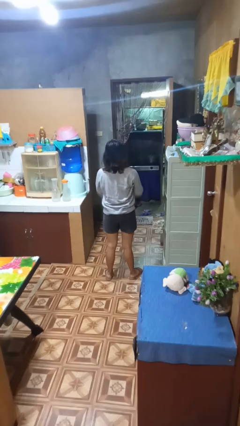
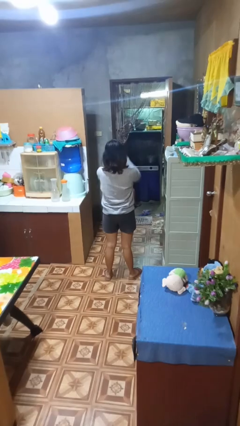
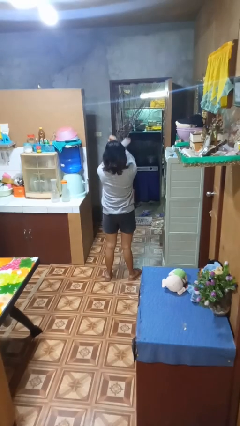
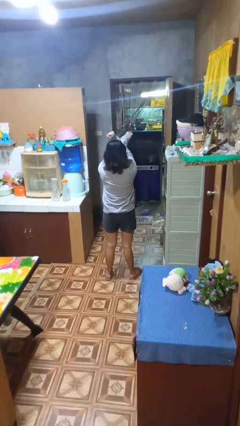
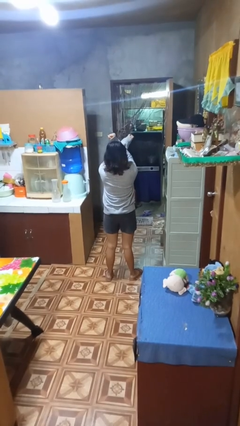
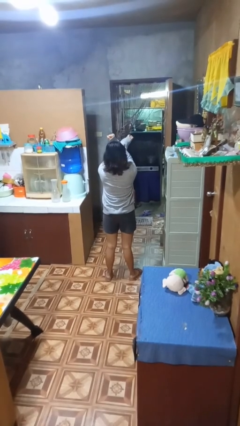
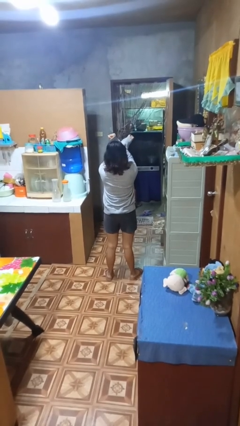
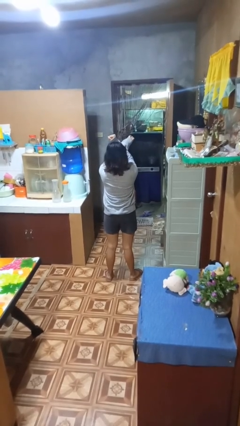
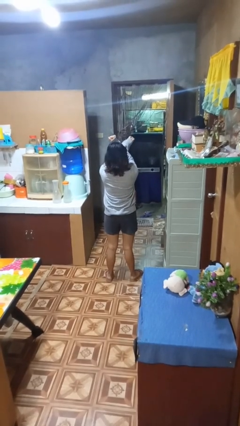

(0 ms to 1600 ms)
person gestures arms x

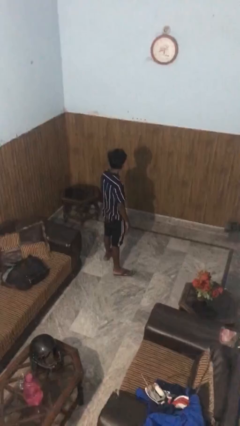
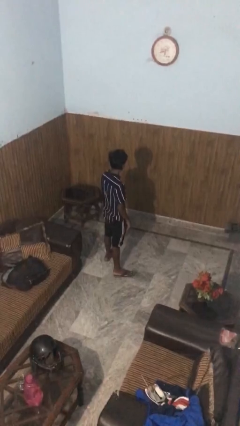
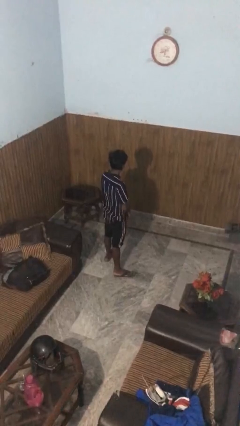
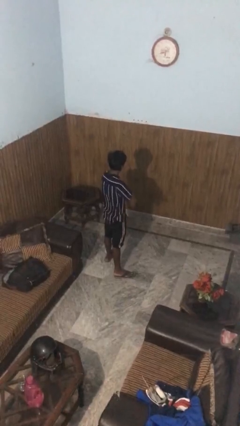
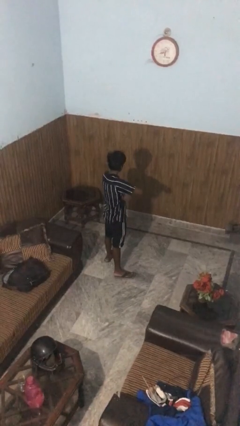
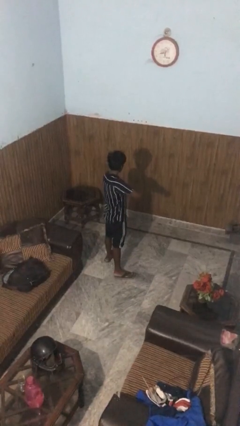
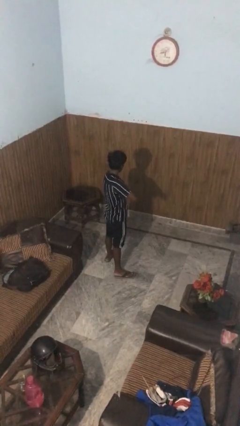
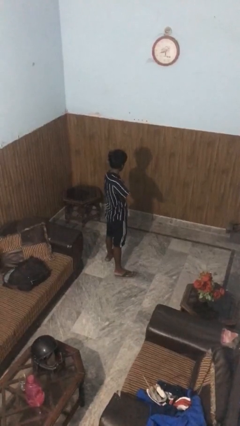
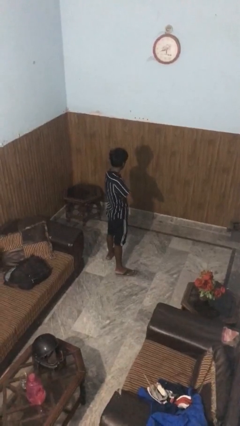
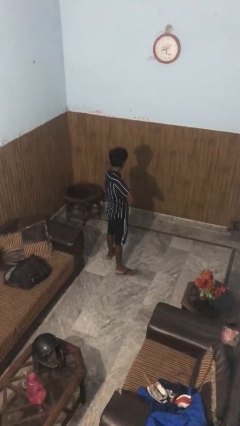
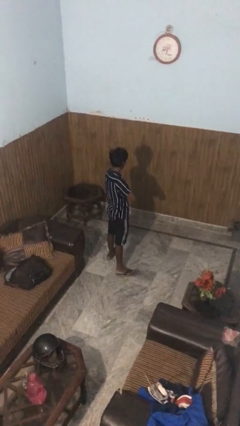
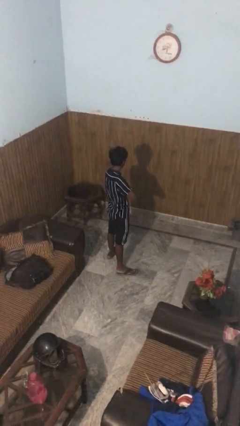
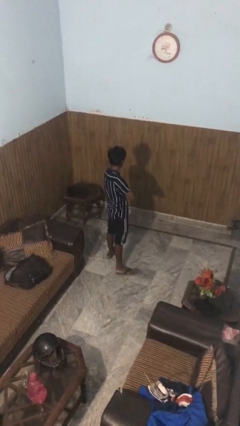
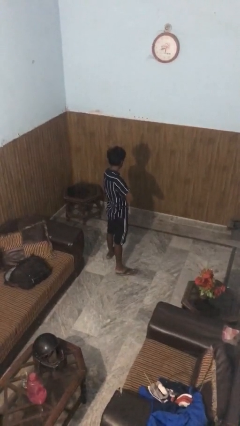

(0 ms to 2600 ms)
person crosses arms

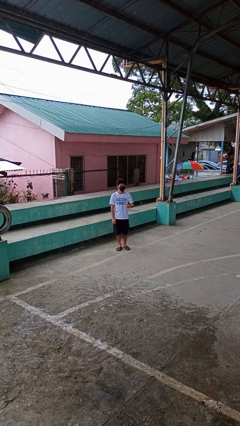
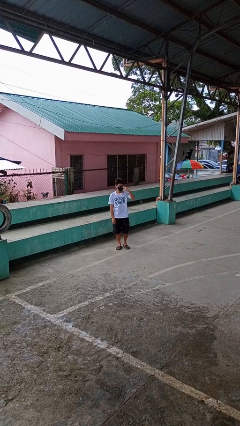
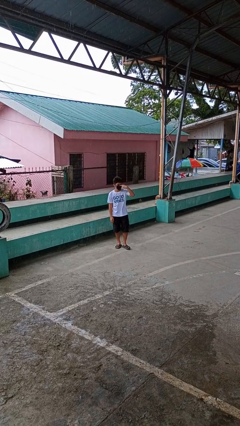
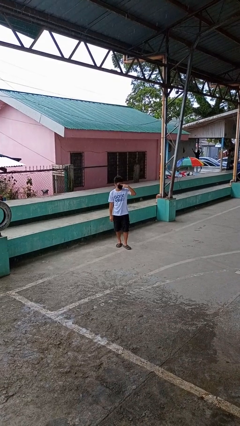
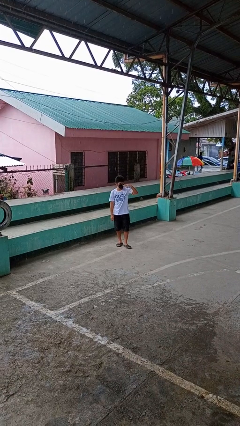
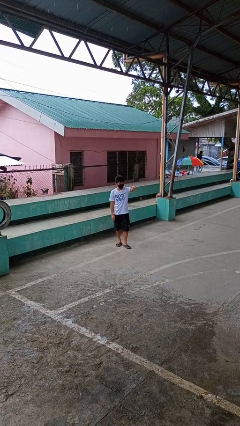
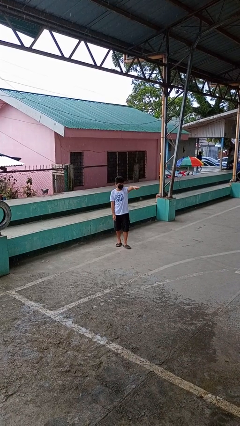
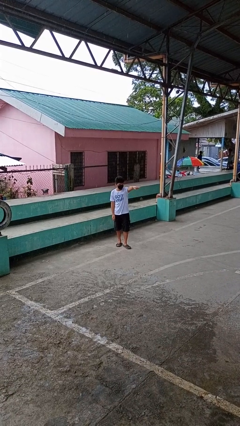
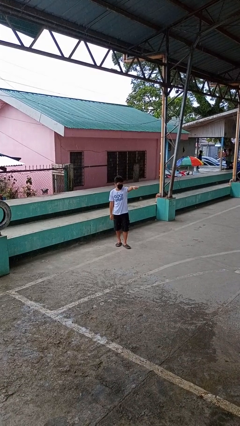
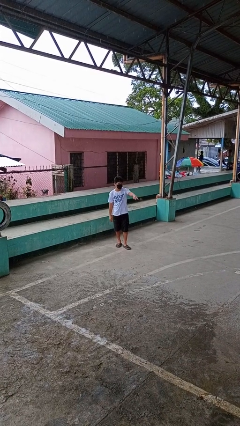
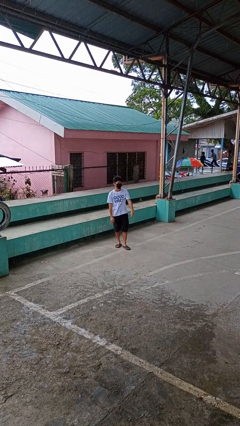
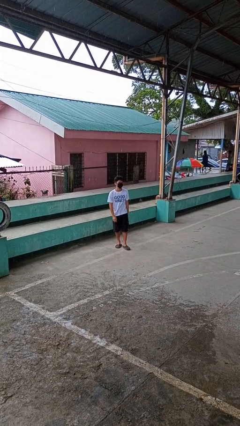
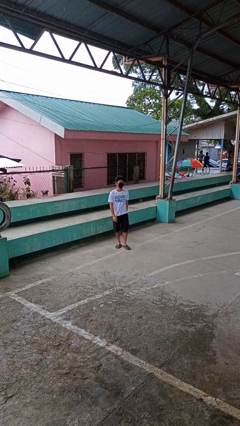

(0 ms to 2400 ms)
person gestures watch closely

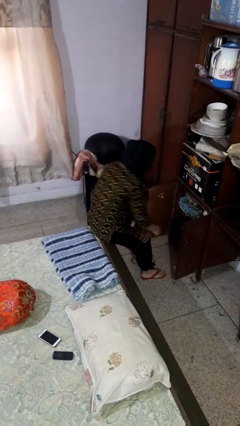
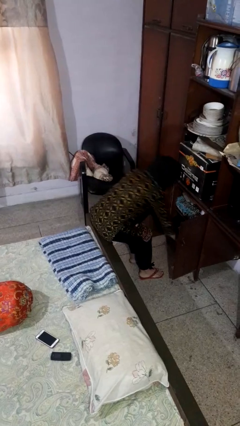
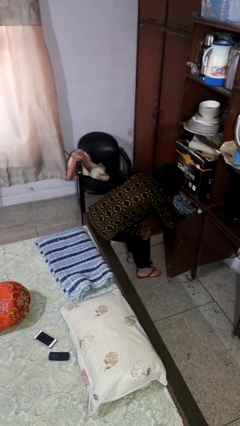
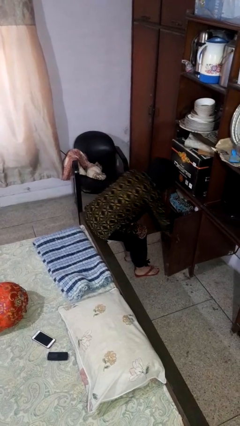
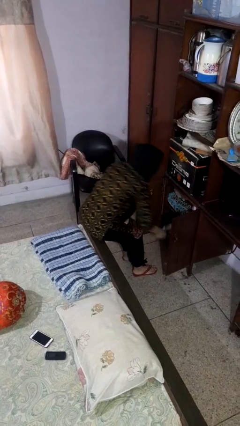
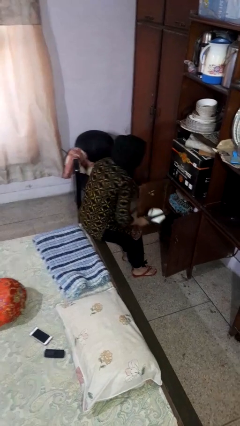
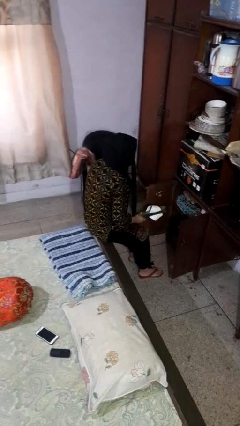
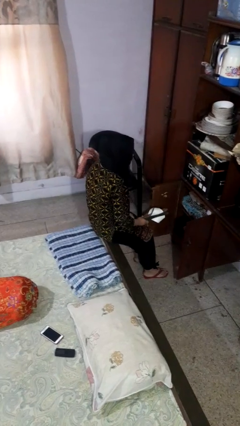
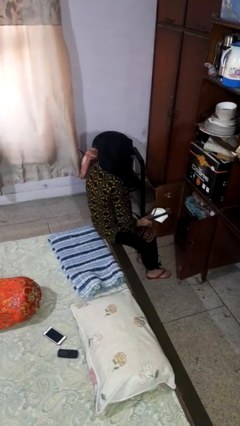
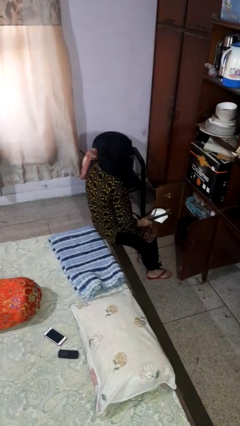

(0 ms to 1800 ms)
person takes object from cabinet

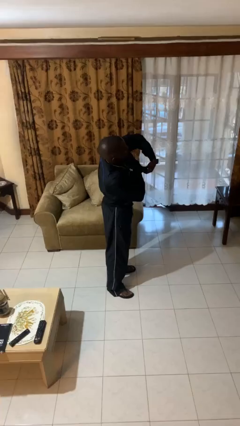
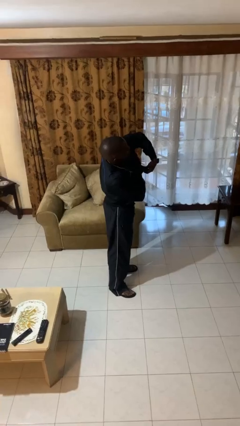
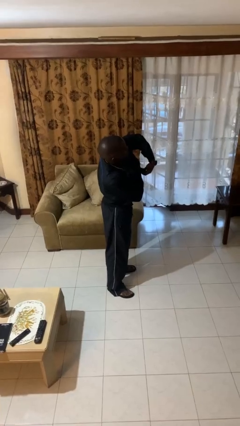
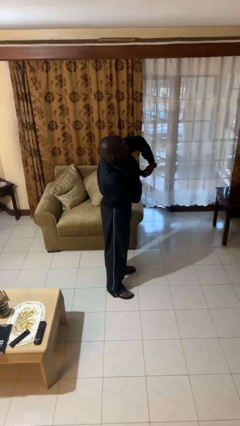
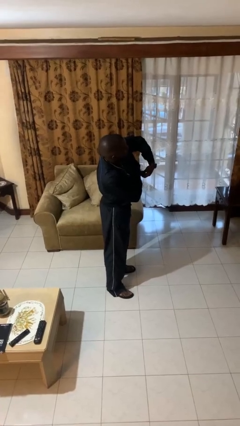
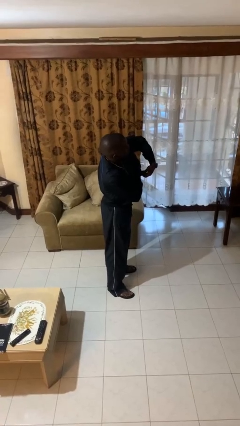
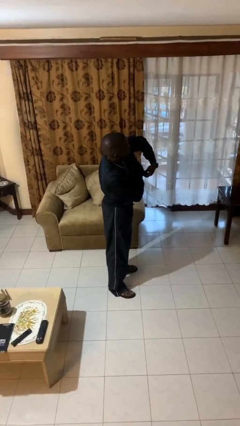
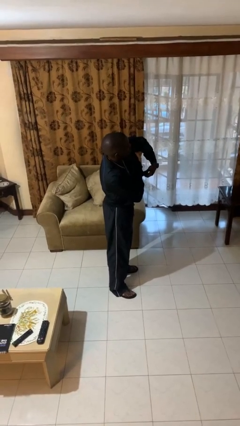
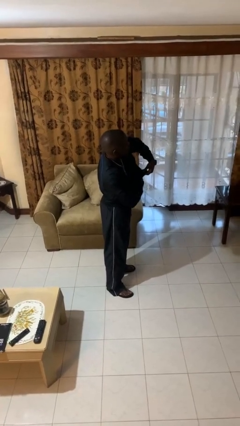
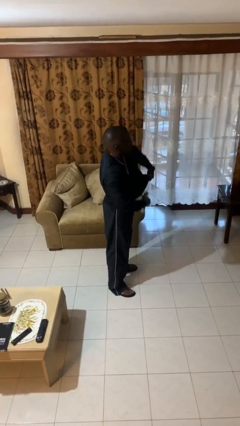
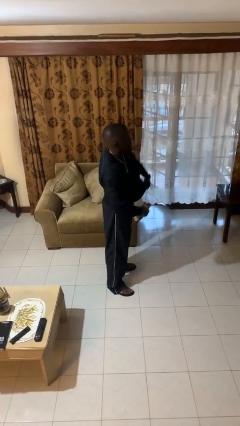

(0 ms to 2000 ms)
person applies deodorant

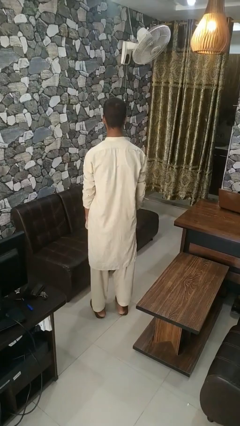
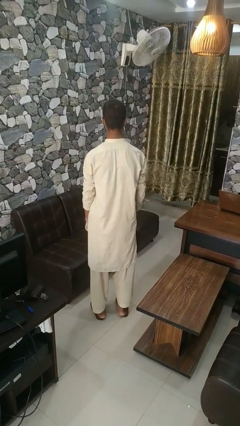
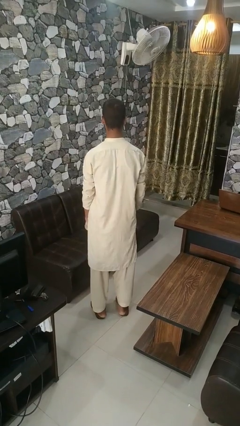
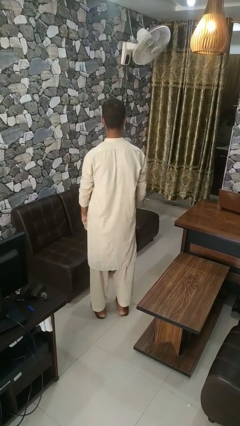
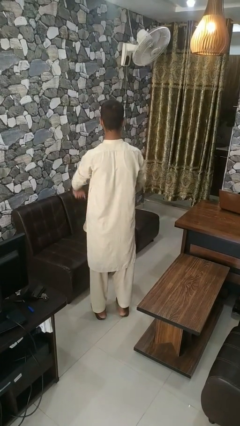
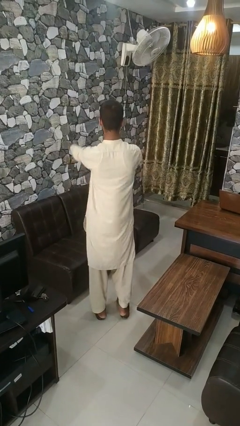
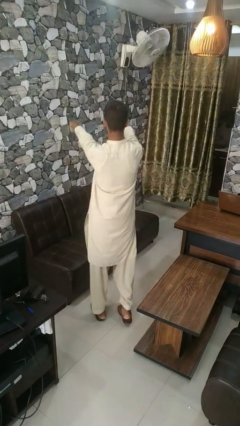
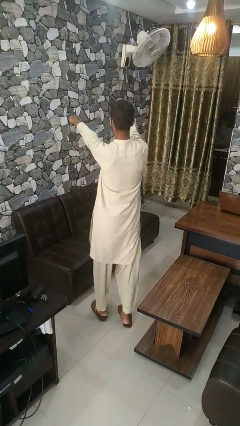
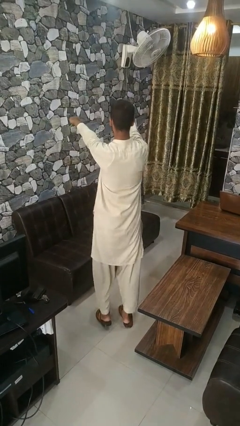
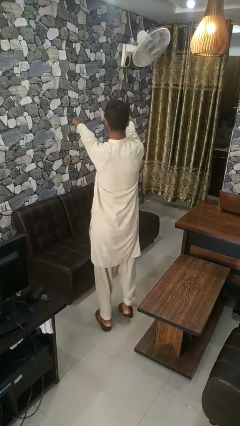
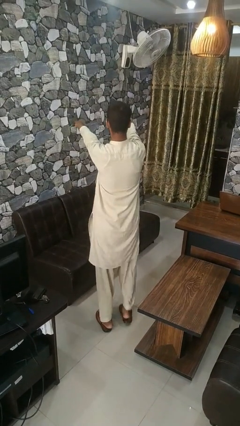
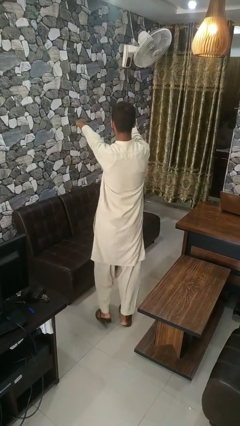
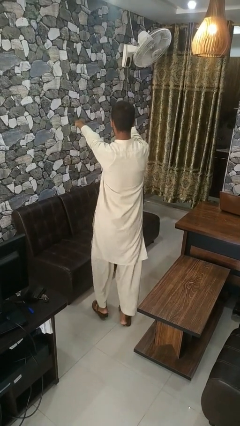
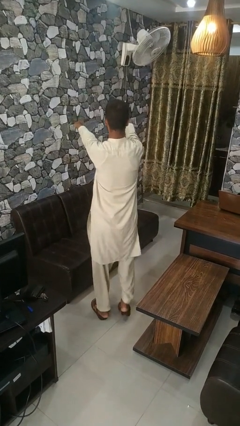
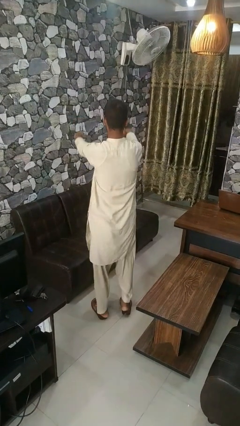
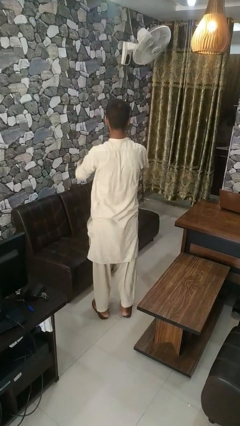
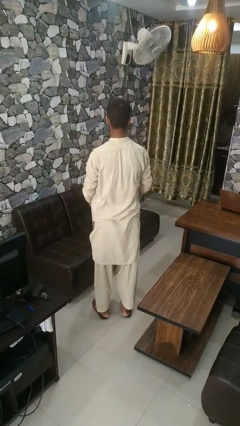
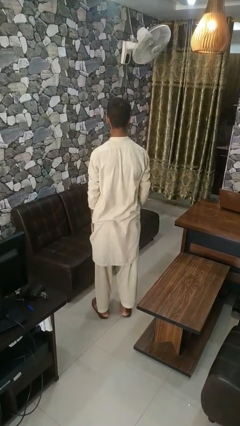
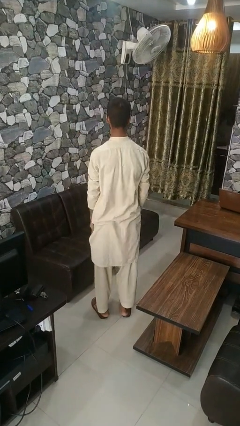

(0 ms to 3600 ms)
person walks tiptoe

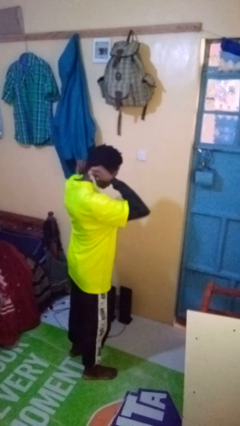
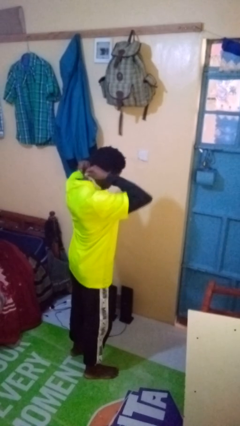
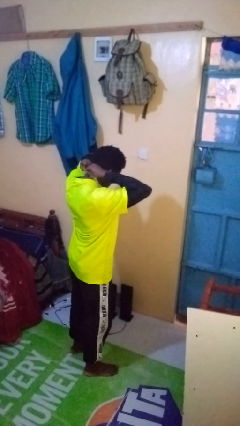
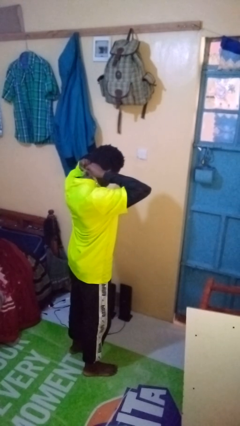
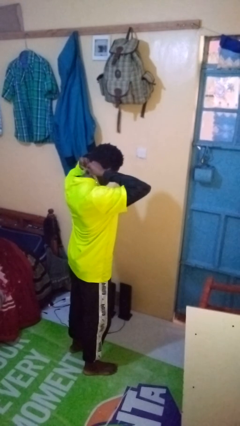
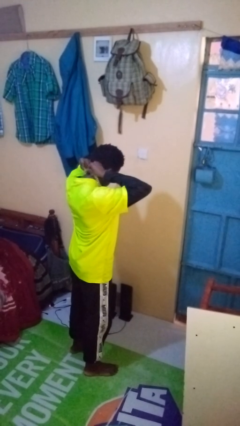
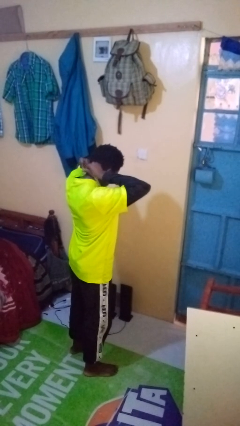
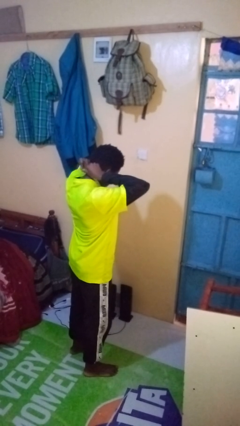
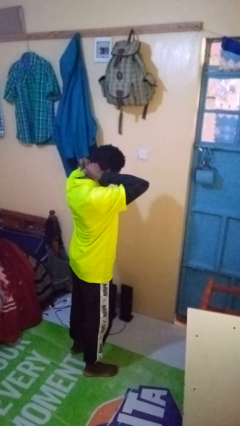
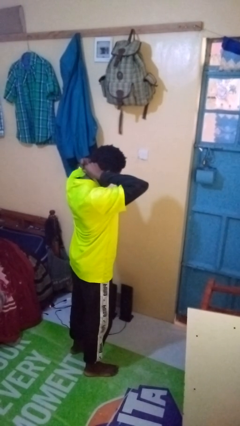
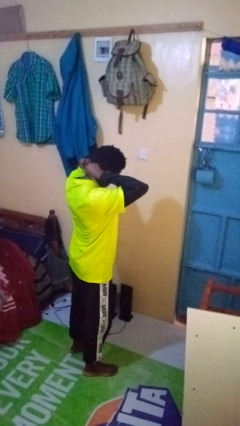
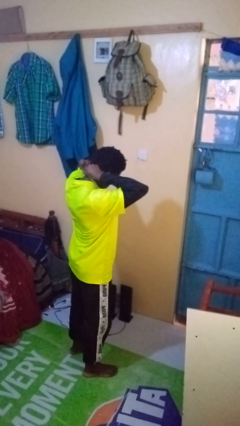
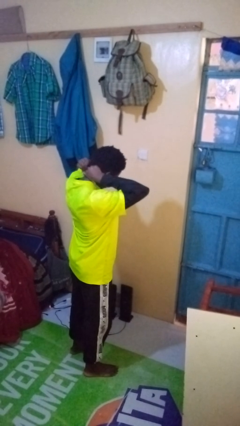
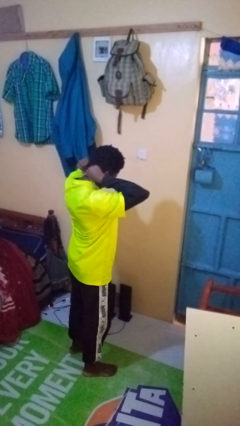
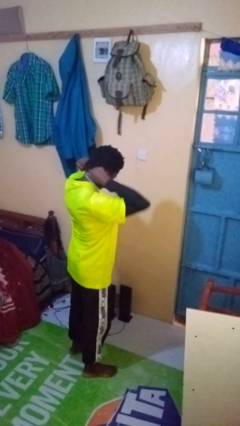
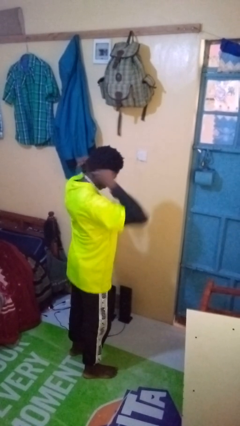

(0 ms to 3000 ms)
person puts on necklace
